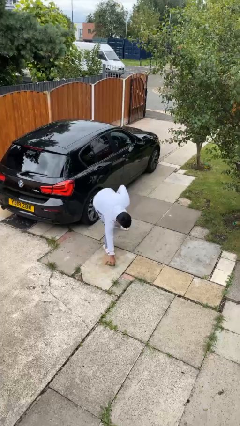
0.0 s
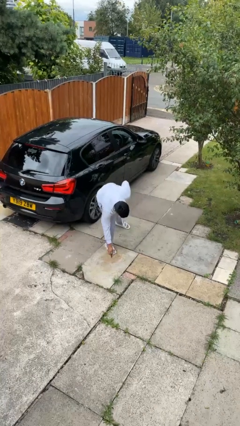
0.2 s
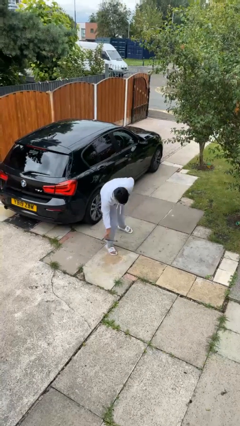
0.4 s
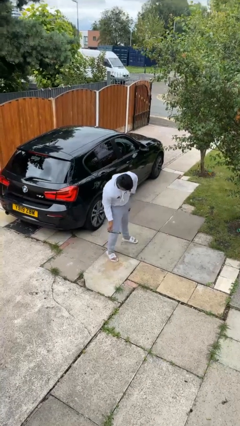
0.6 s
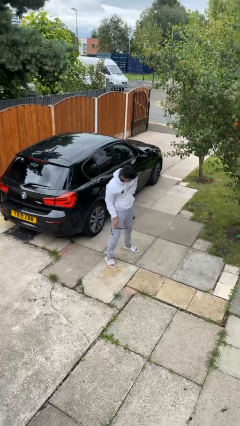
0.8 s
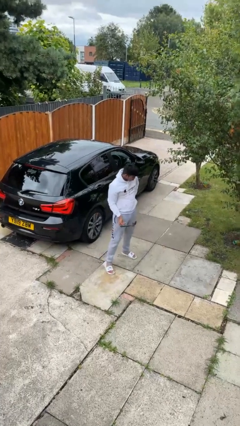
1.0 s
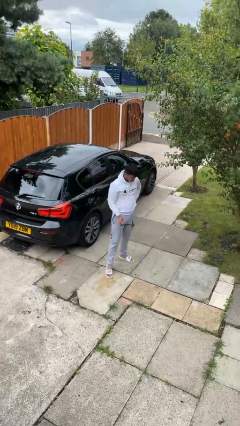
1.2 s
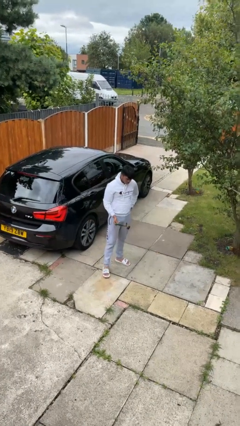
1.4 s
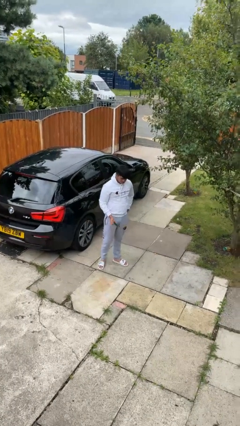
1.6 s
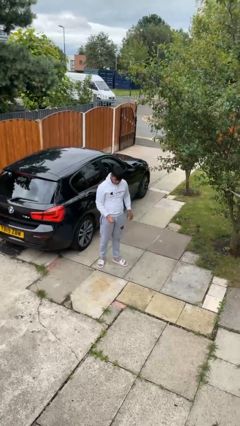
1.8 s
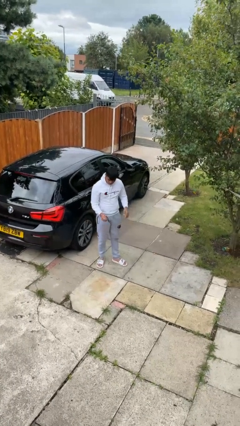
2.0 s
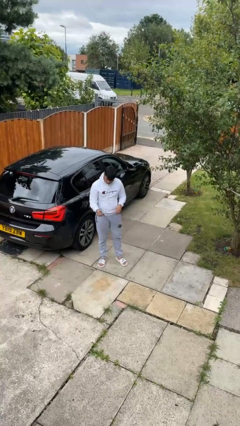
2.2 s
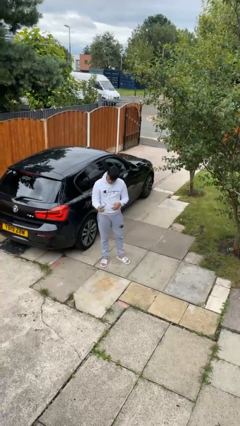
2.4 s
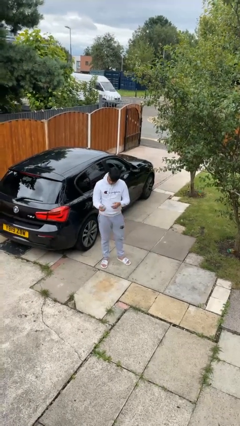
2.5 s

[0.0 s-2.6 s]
person picks up object from floor

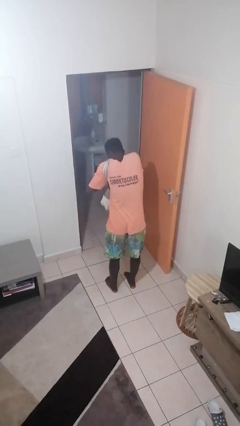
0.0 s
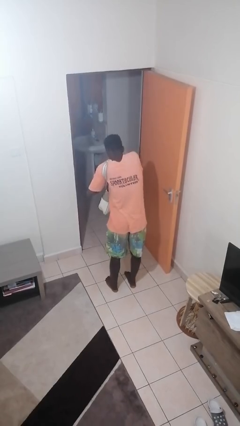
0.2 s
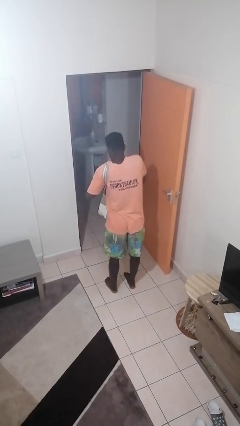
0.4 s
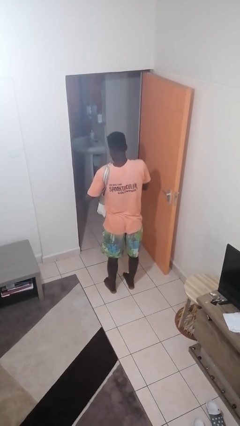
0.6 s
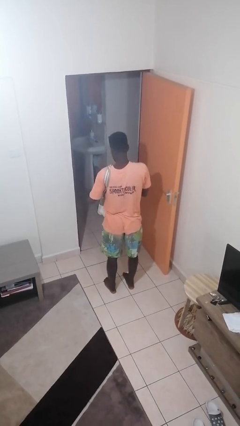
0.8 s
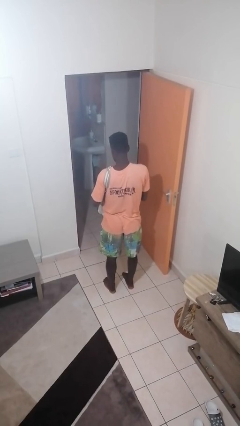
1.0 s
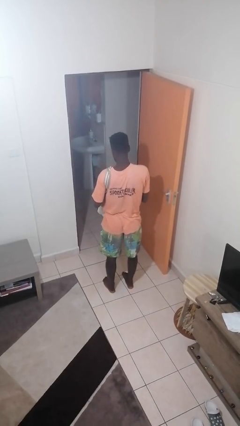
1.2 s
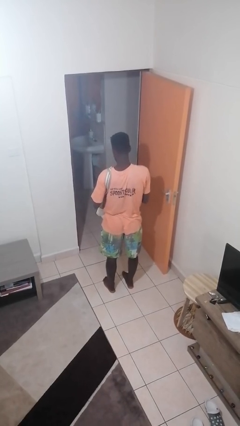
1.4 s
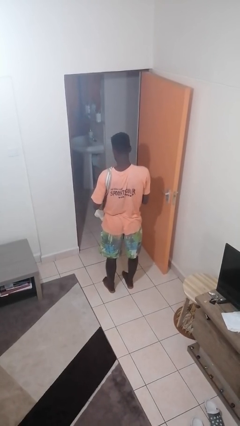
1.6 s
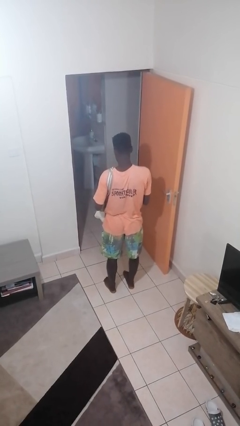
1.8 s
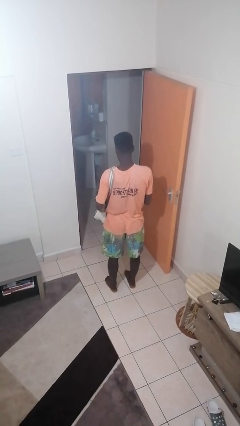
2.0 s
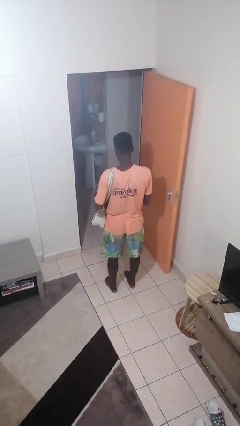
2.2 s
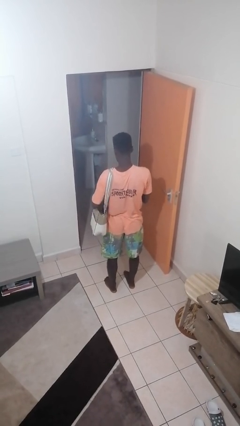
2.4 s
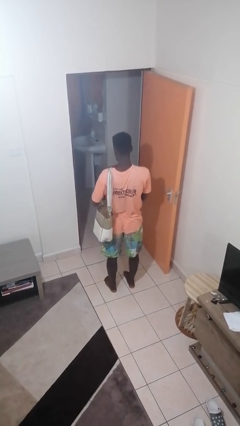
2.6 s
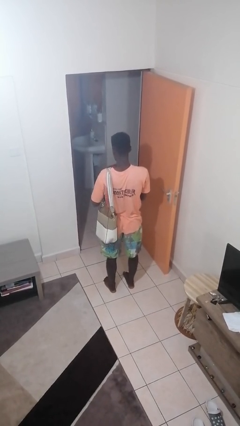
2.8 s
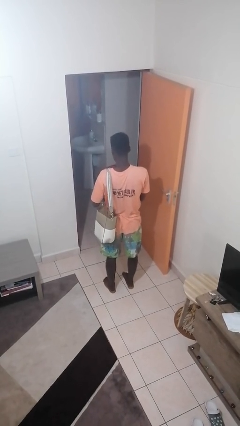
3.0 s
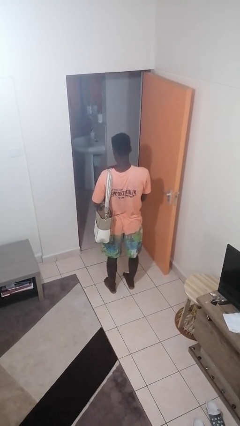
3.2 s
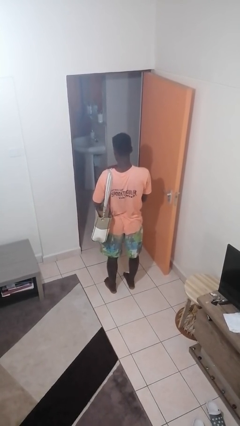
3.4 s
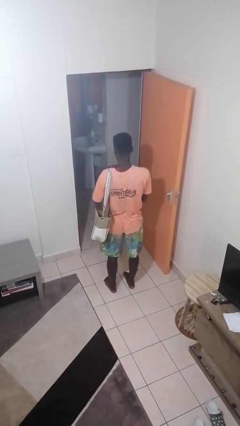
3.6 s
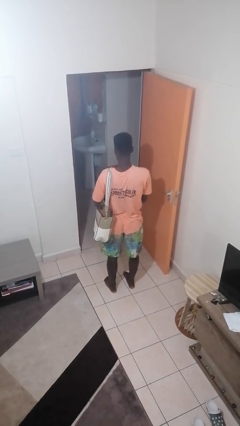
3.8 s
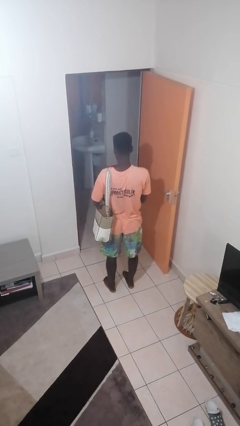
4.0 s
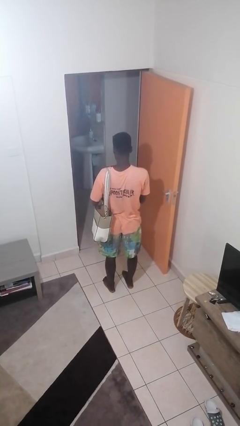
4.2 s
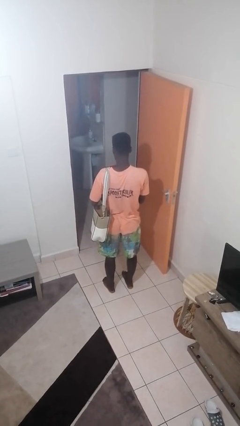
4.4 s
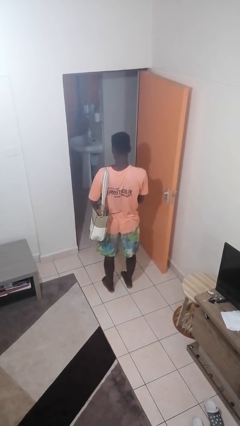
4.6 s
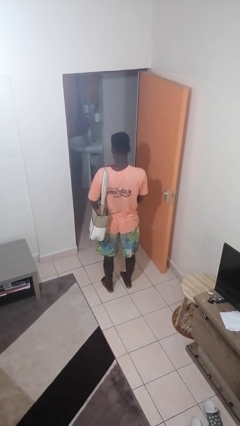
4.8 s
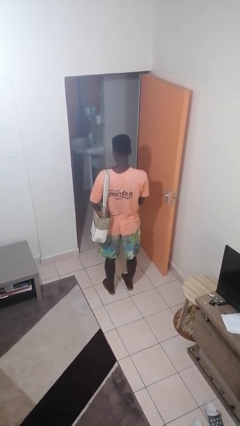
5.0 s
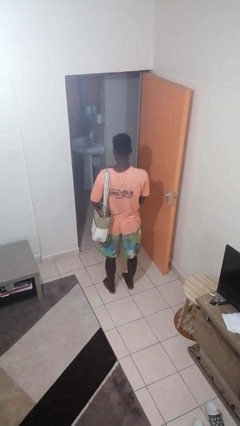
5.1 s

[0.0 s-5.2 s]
person takes object from purse

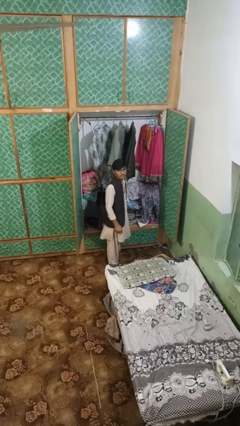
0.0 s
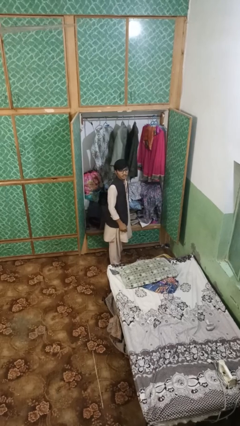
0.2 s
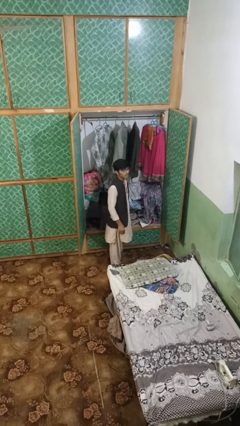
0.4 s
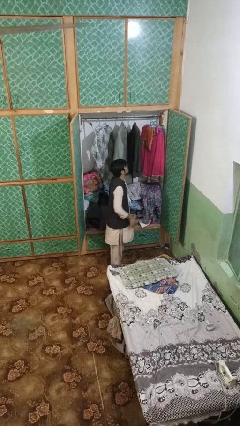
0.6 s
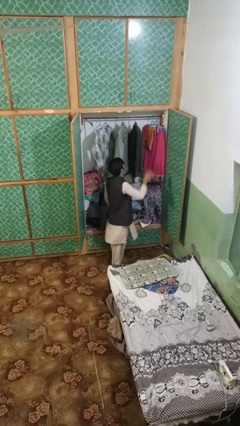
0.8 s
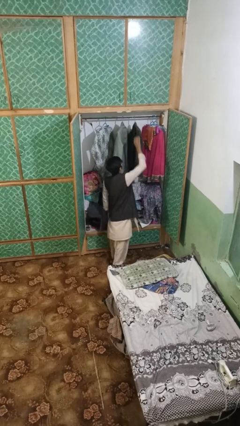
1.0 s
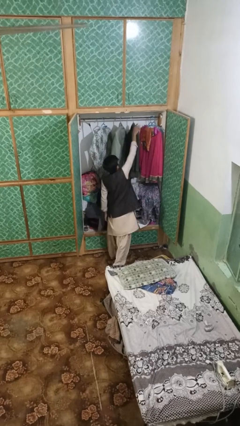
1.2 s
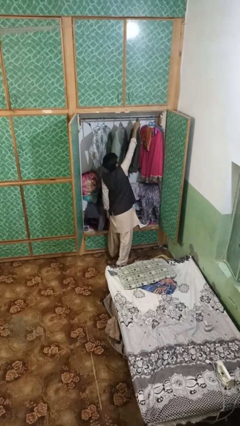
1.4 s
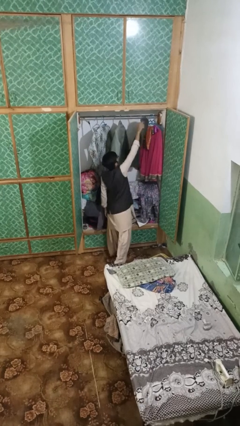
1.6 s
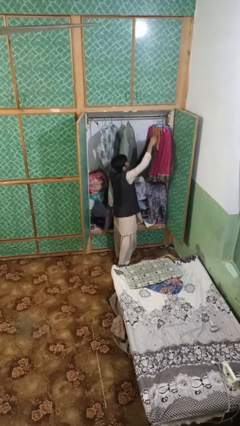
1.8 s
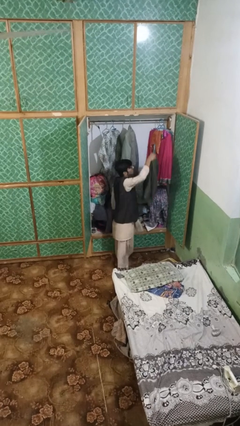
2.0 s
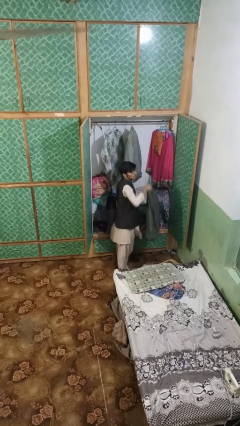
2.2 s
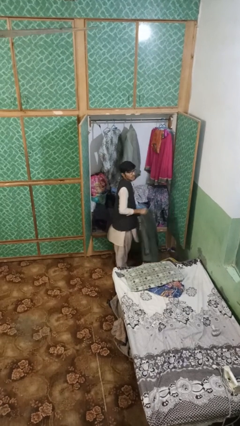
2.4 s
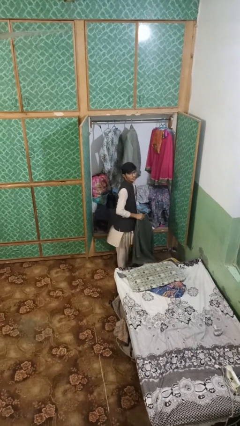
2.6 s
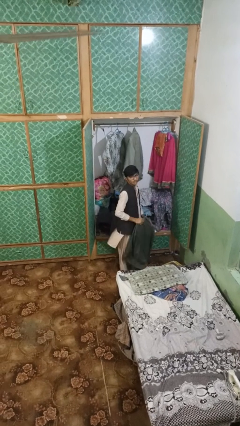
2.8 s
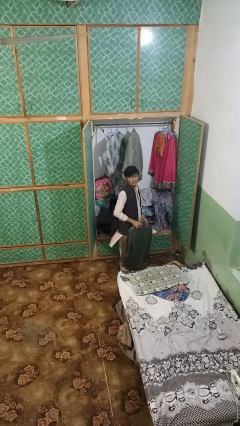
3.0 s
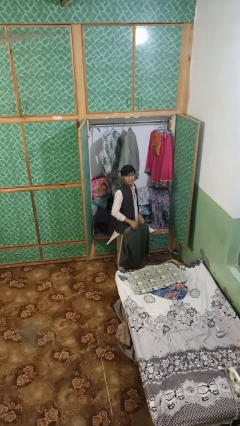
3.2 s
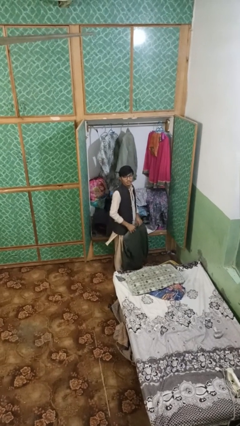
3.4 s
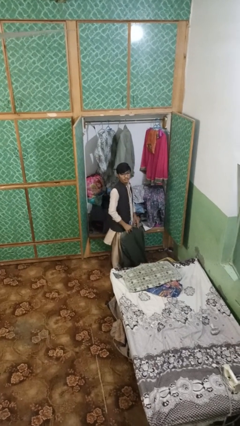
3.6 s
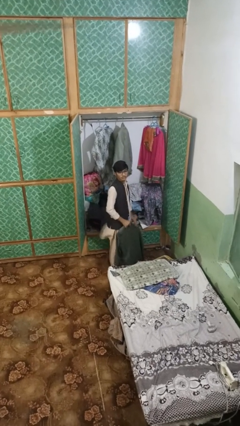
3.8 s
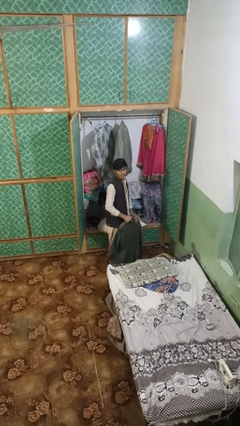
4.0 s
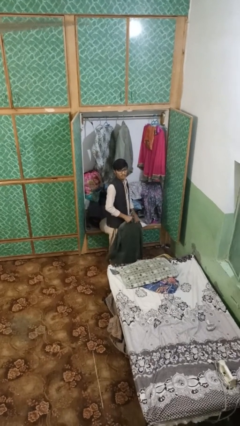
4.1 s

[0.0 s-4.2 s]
person takes clothes from closet

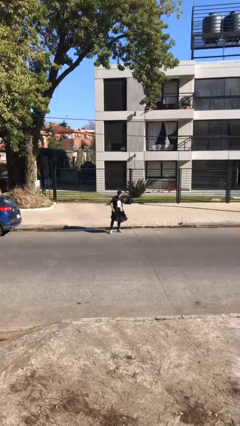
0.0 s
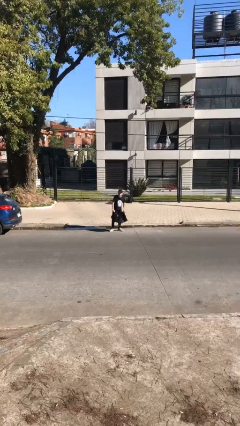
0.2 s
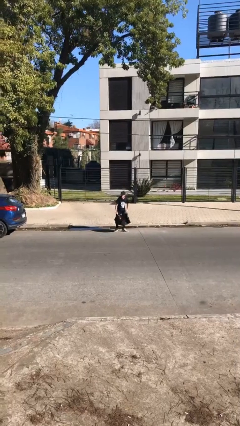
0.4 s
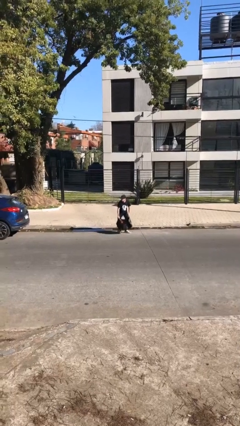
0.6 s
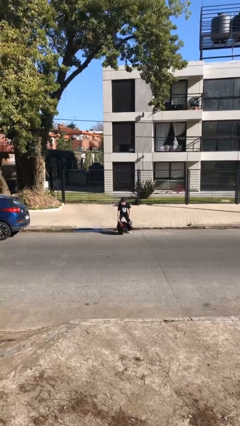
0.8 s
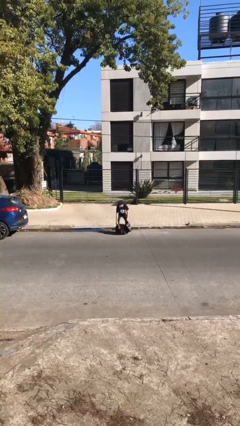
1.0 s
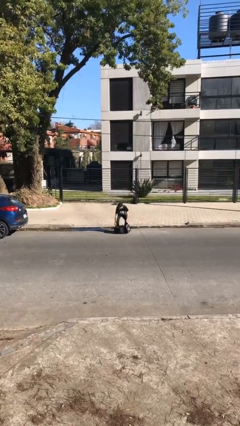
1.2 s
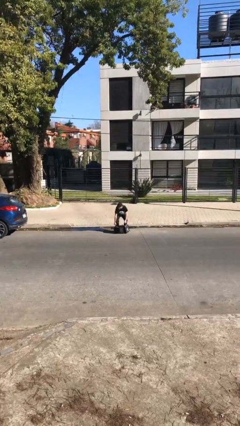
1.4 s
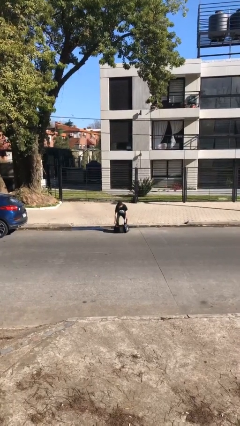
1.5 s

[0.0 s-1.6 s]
person puts down object on floor

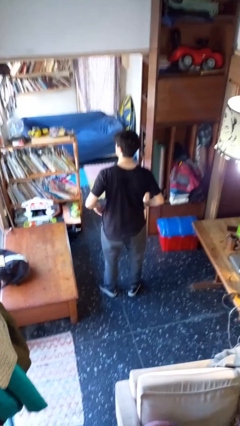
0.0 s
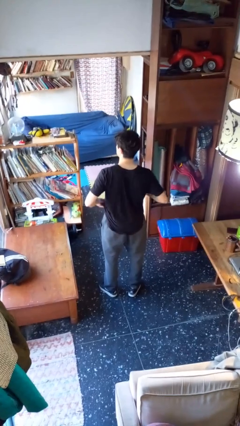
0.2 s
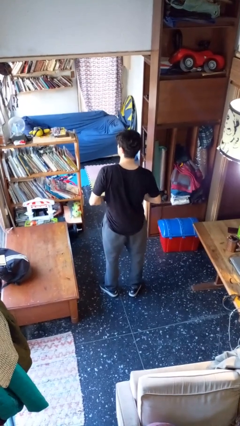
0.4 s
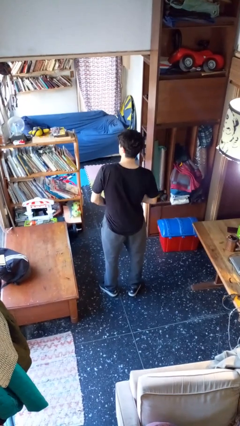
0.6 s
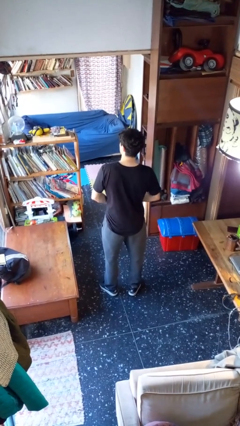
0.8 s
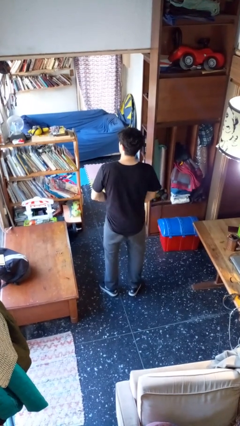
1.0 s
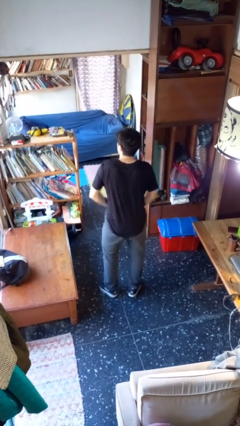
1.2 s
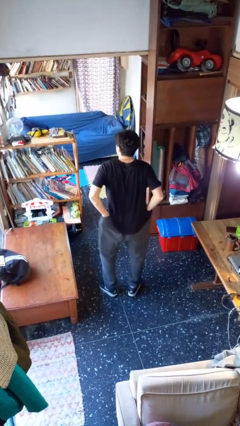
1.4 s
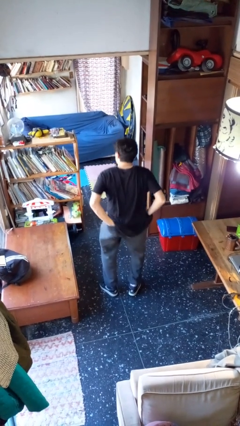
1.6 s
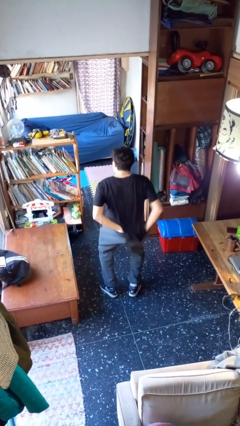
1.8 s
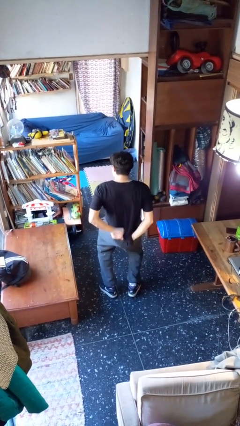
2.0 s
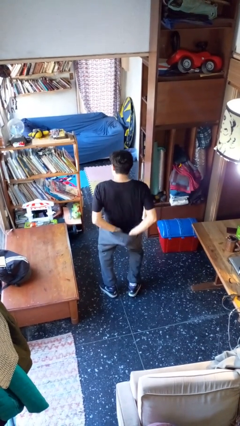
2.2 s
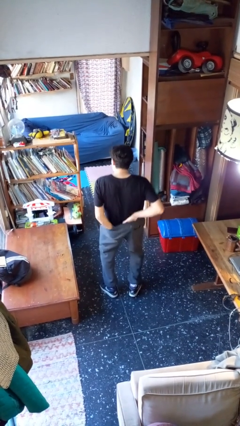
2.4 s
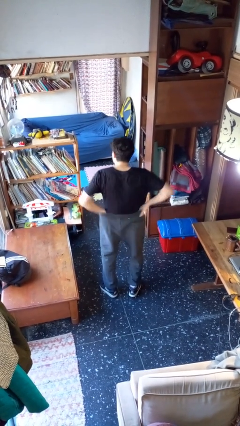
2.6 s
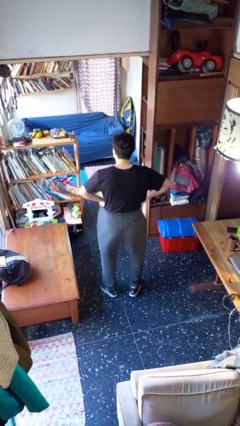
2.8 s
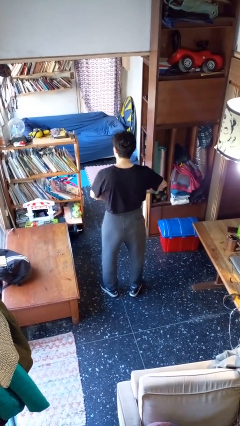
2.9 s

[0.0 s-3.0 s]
person tucks in shirt

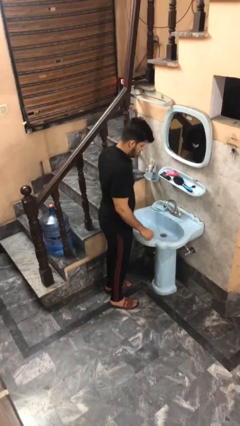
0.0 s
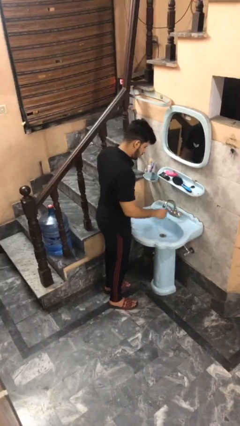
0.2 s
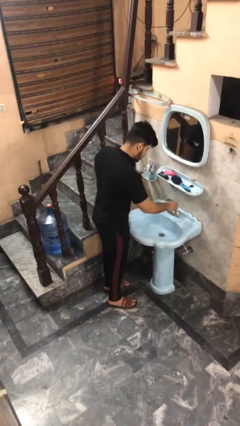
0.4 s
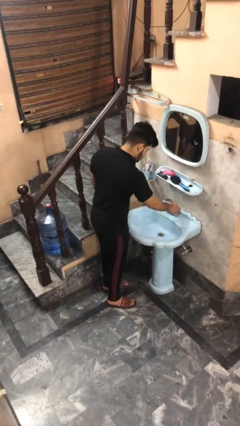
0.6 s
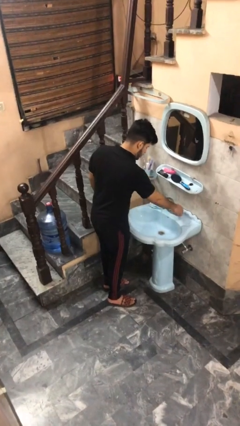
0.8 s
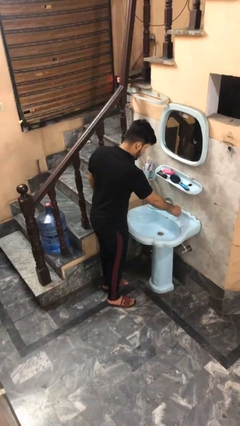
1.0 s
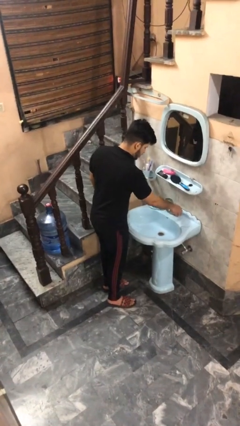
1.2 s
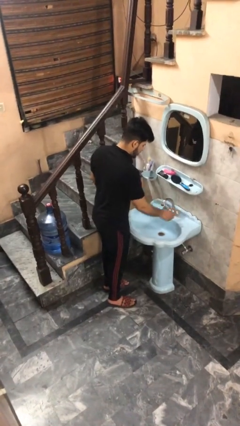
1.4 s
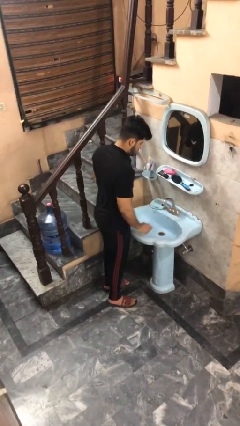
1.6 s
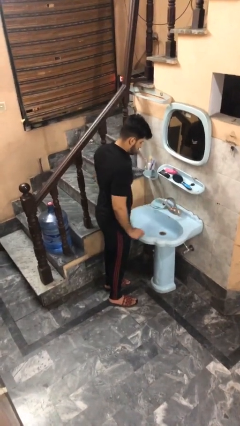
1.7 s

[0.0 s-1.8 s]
person turns off faucet
